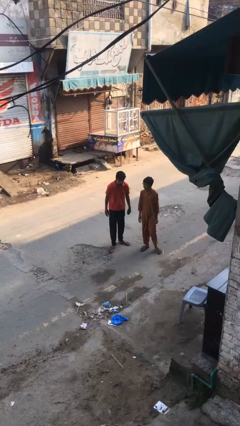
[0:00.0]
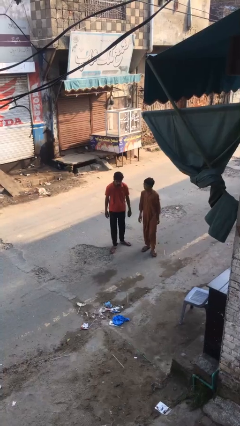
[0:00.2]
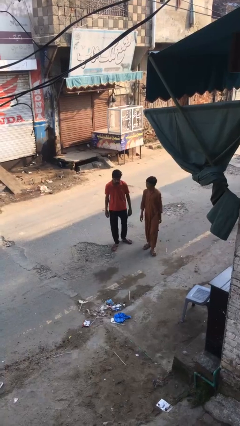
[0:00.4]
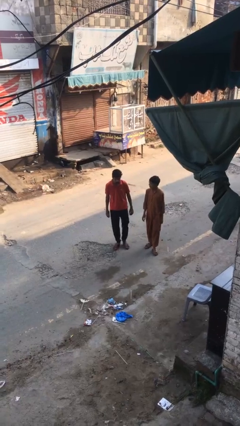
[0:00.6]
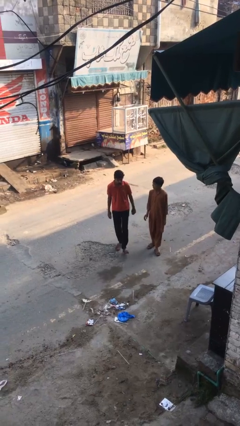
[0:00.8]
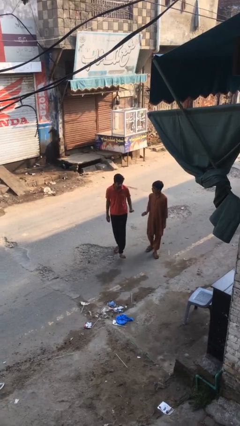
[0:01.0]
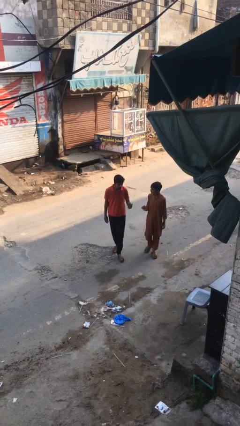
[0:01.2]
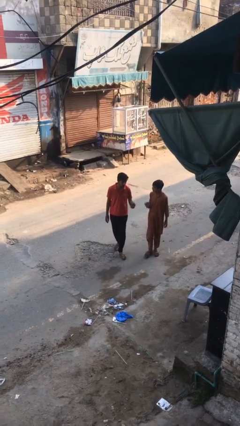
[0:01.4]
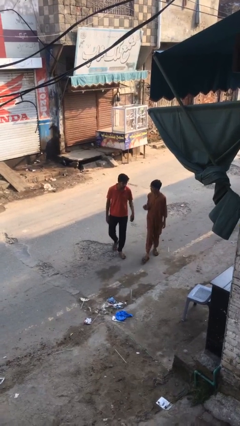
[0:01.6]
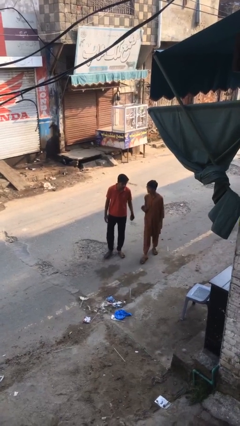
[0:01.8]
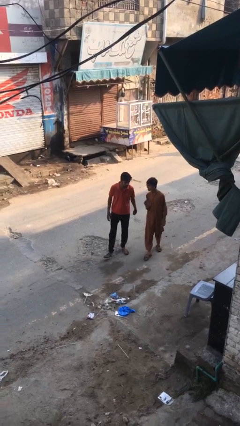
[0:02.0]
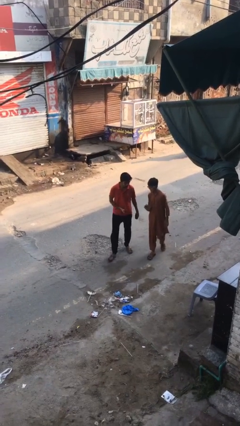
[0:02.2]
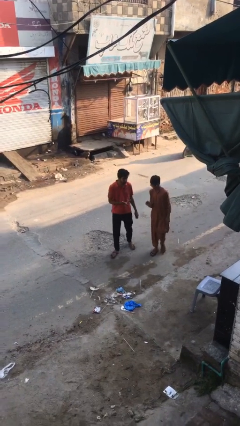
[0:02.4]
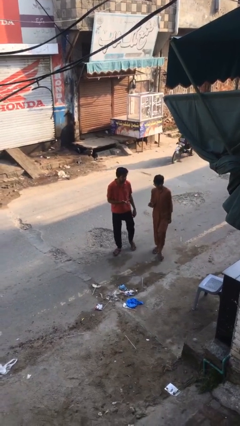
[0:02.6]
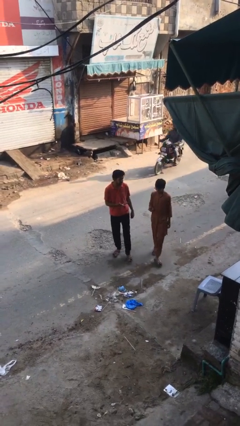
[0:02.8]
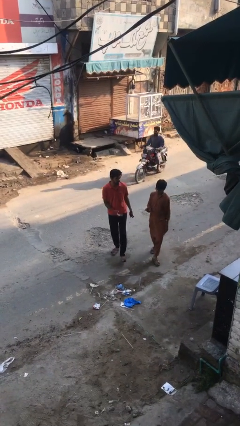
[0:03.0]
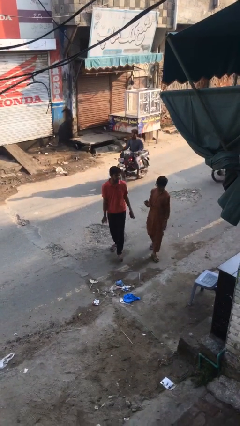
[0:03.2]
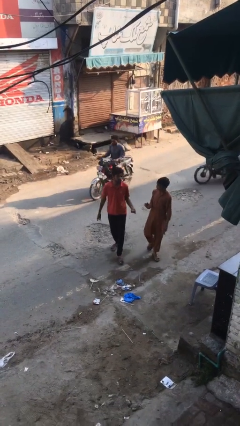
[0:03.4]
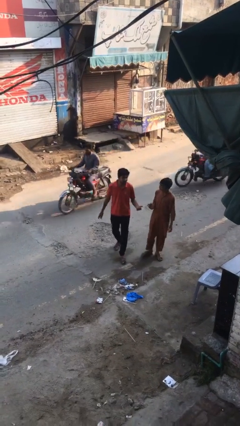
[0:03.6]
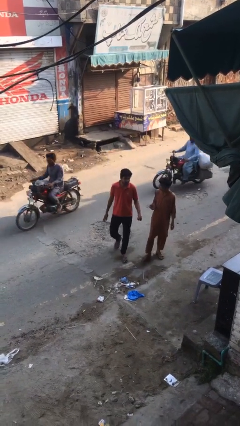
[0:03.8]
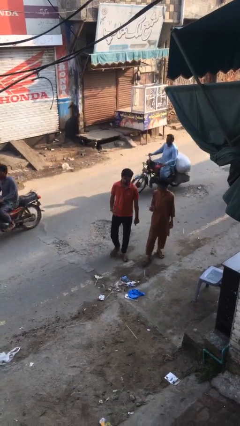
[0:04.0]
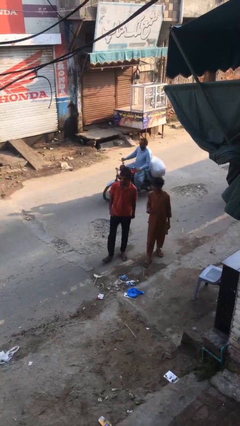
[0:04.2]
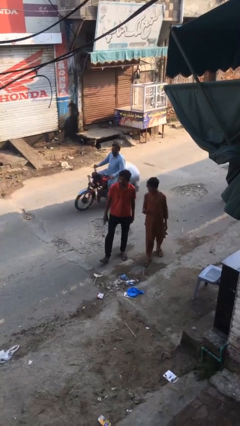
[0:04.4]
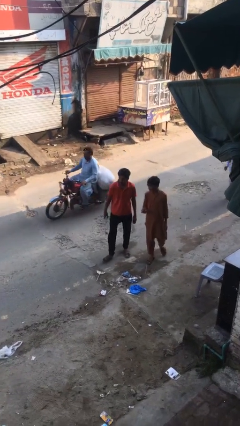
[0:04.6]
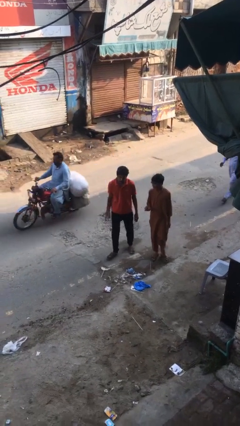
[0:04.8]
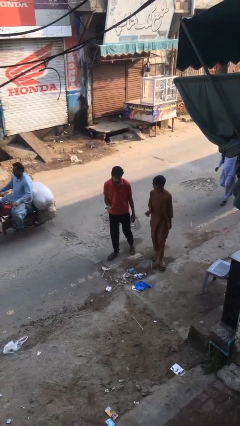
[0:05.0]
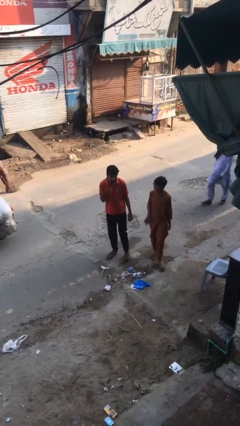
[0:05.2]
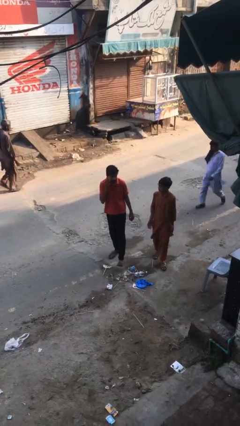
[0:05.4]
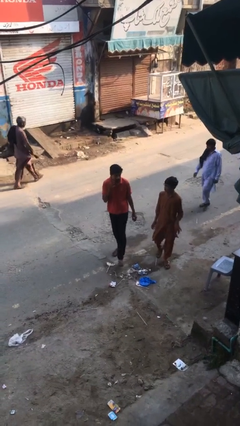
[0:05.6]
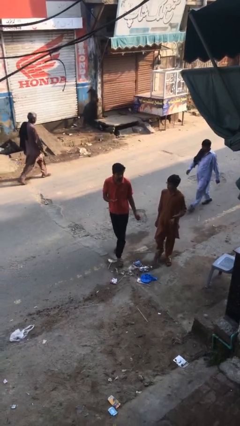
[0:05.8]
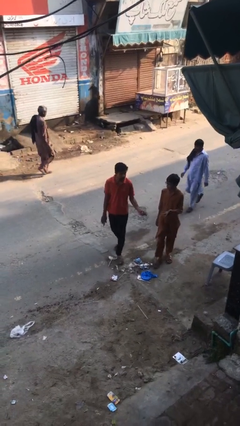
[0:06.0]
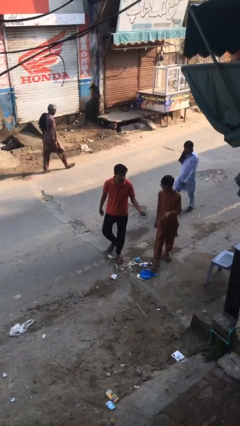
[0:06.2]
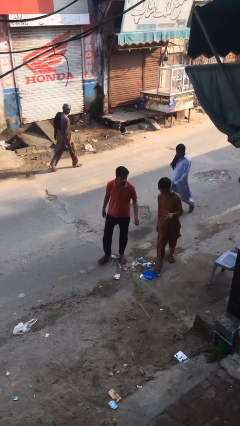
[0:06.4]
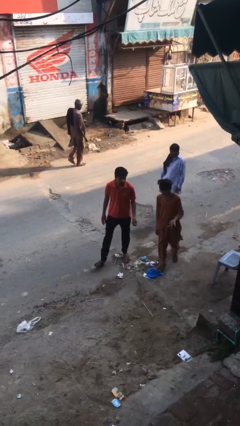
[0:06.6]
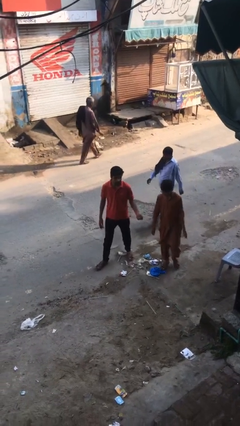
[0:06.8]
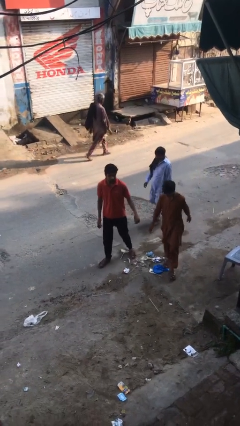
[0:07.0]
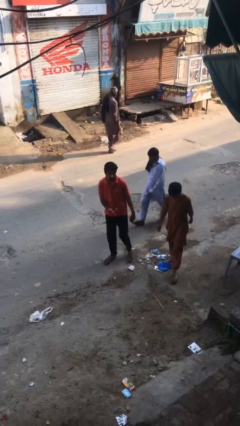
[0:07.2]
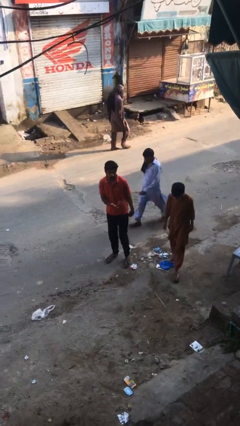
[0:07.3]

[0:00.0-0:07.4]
person talks to person

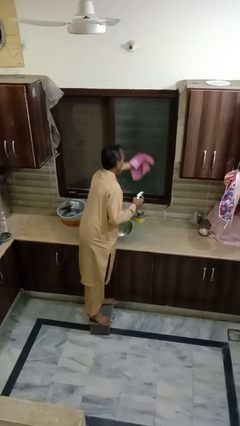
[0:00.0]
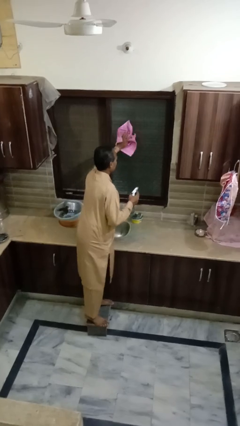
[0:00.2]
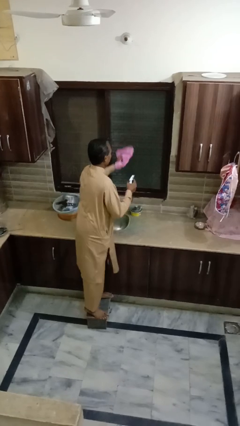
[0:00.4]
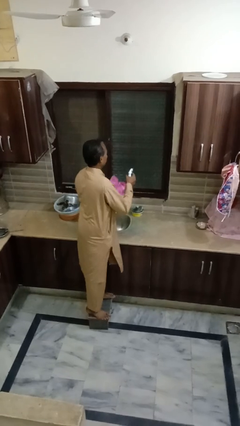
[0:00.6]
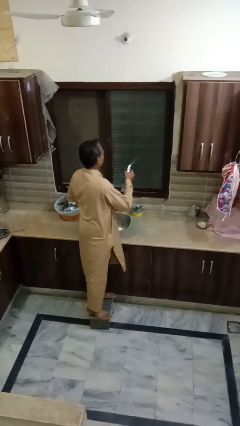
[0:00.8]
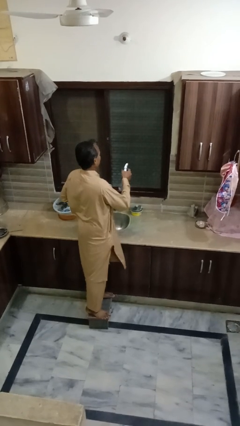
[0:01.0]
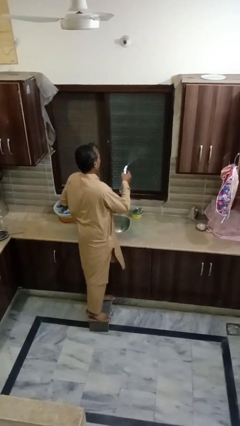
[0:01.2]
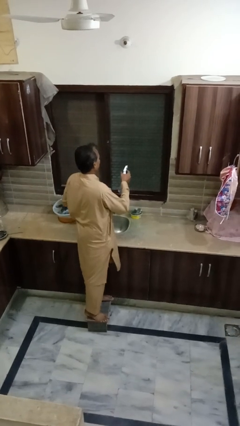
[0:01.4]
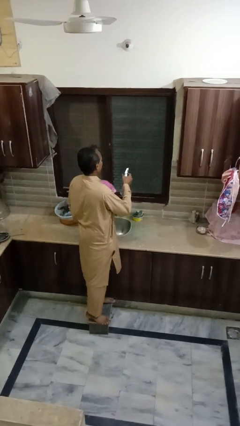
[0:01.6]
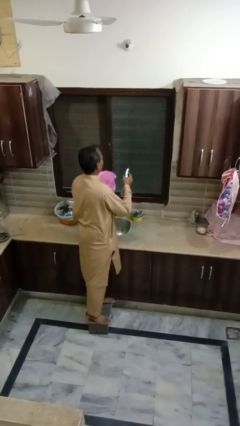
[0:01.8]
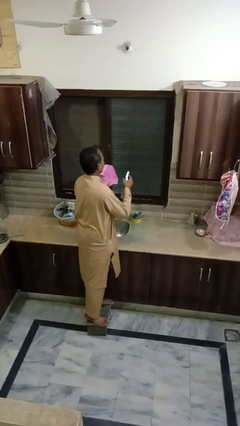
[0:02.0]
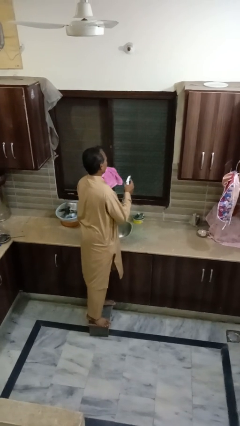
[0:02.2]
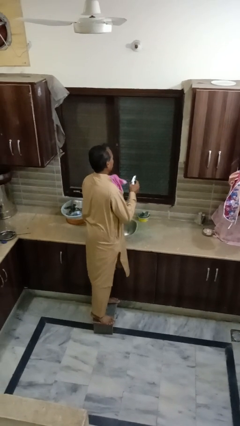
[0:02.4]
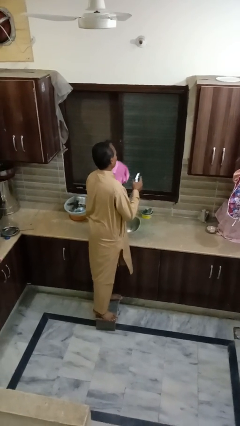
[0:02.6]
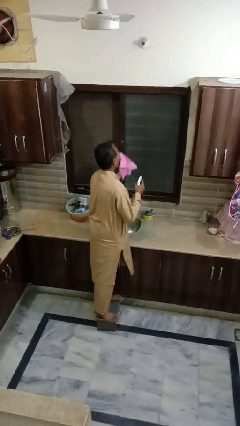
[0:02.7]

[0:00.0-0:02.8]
person sprays from bottle

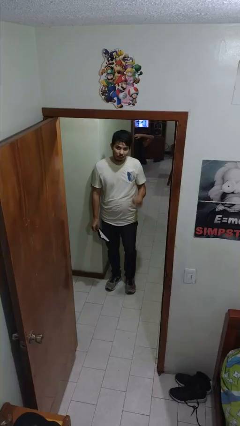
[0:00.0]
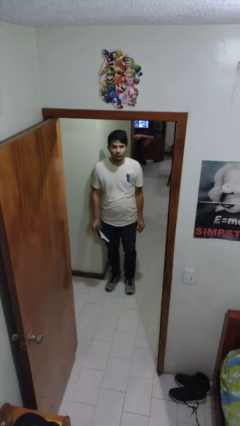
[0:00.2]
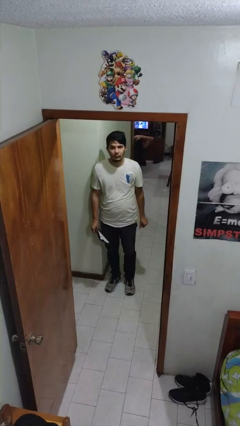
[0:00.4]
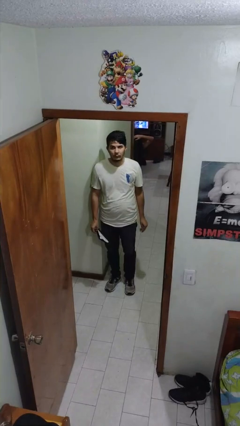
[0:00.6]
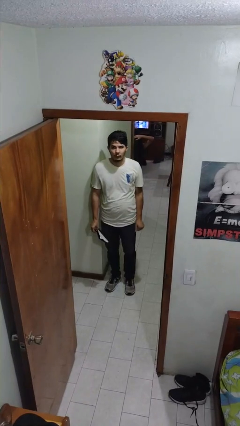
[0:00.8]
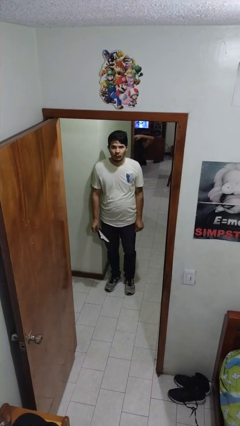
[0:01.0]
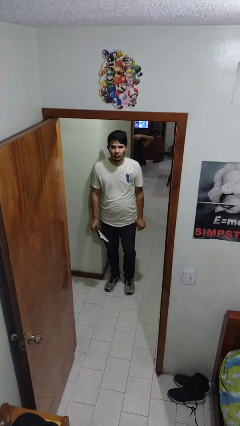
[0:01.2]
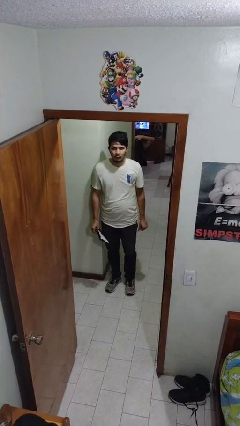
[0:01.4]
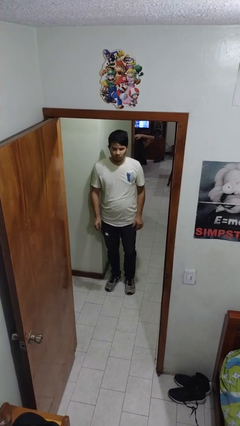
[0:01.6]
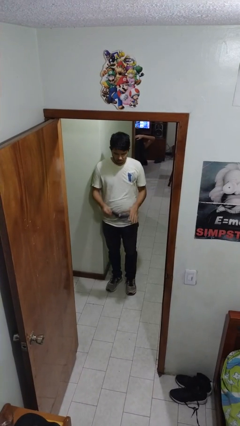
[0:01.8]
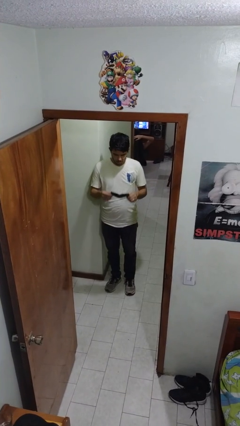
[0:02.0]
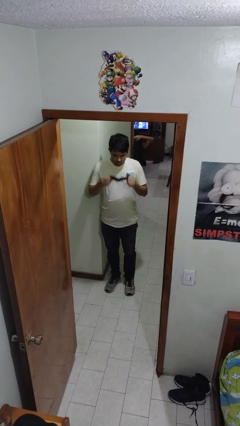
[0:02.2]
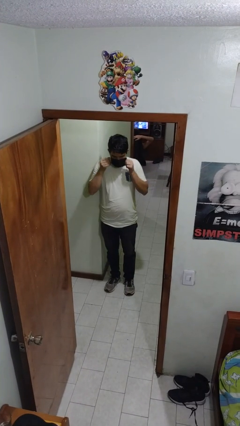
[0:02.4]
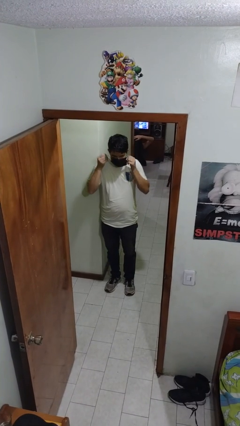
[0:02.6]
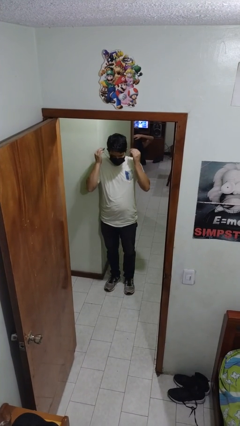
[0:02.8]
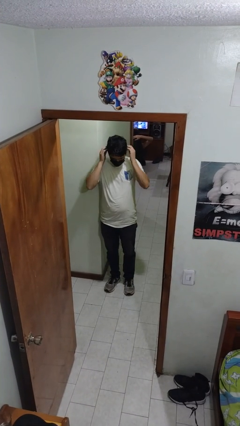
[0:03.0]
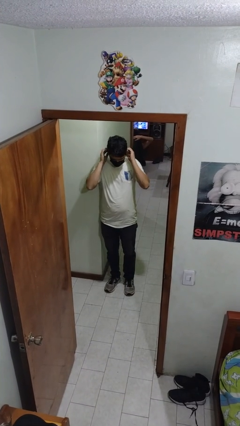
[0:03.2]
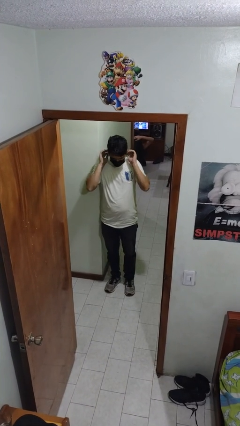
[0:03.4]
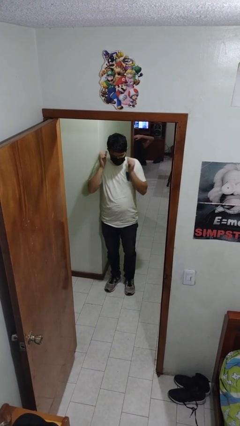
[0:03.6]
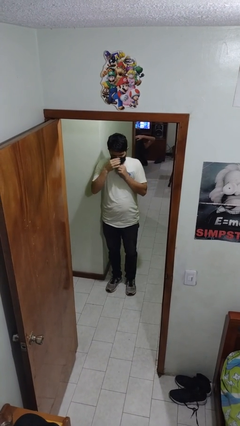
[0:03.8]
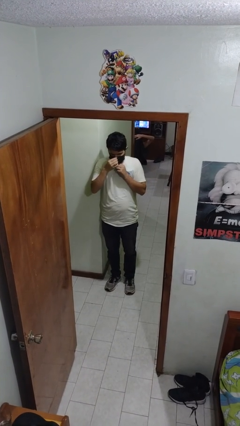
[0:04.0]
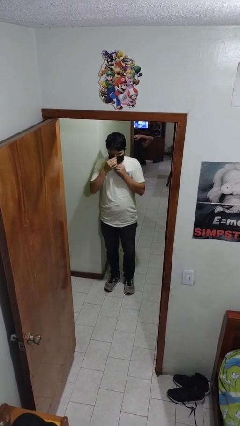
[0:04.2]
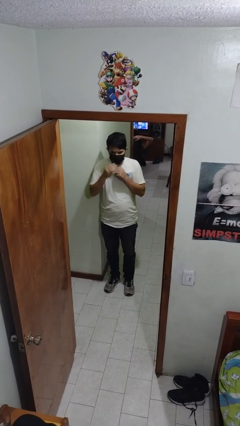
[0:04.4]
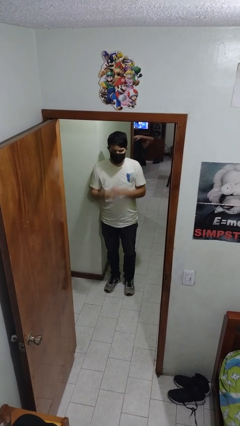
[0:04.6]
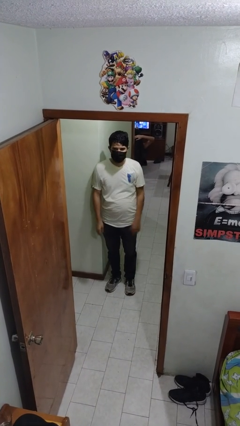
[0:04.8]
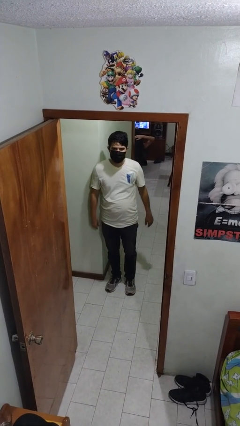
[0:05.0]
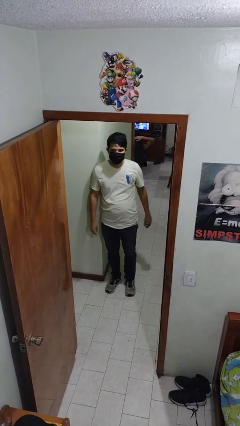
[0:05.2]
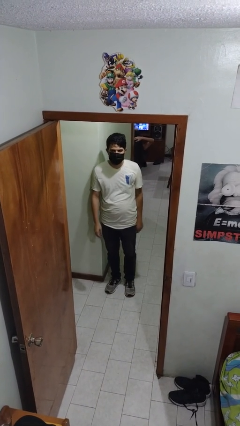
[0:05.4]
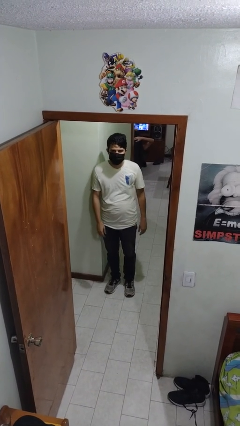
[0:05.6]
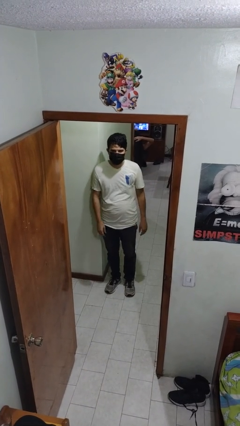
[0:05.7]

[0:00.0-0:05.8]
person puts on facemask

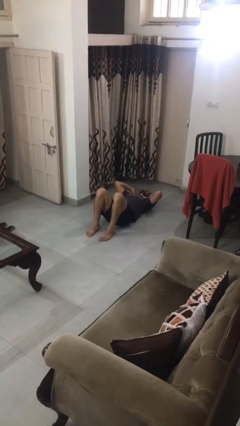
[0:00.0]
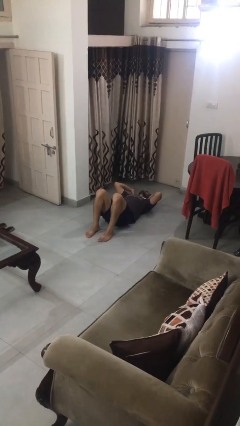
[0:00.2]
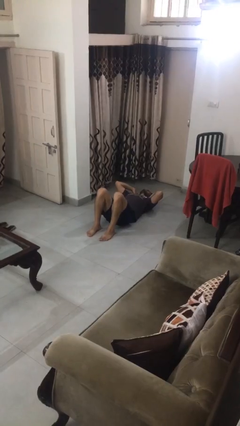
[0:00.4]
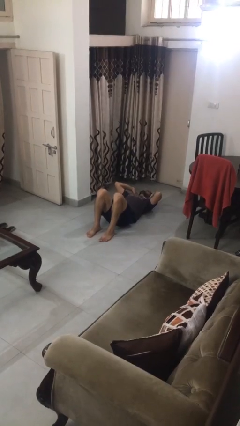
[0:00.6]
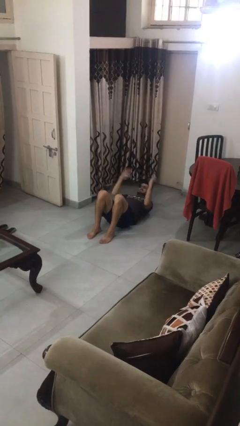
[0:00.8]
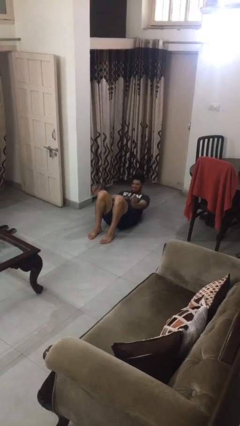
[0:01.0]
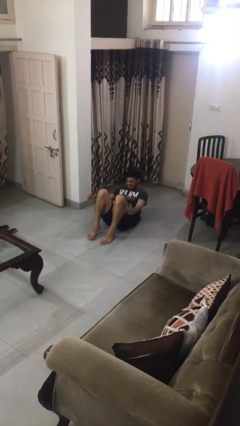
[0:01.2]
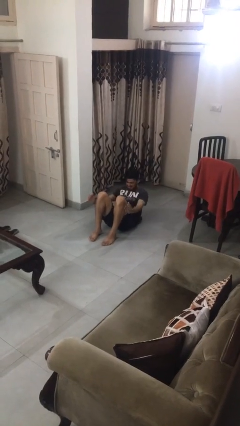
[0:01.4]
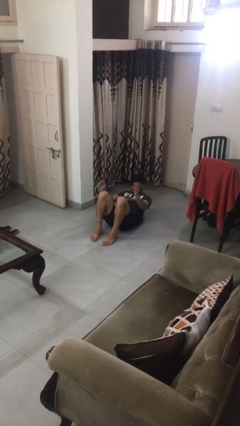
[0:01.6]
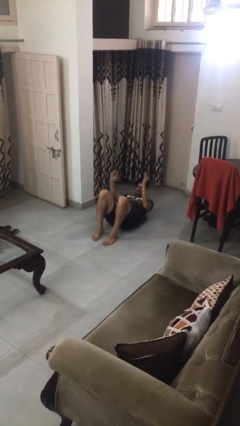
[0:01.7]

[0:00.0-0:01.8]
person exercises with situp
